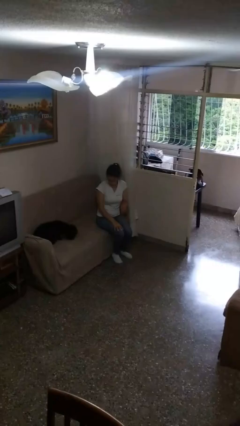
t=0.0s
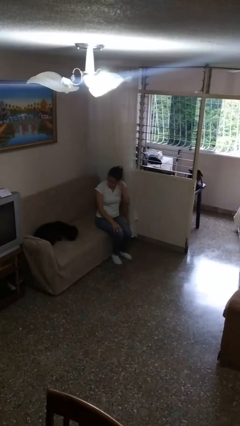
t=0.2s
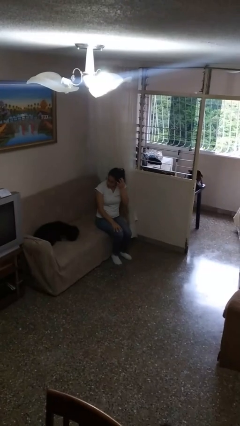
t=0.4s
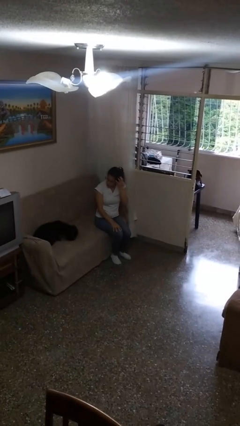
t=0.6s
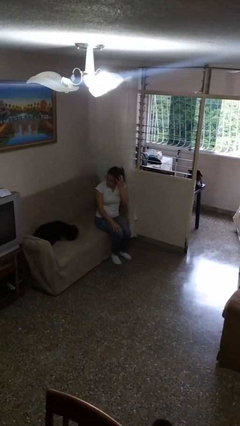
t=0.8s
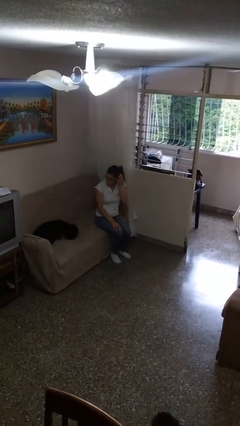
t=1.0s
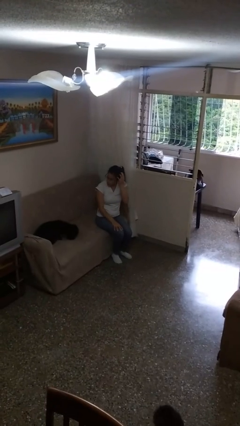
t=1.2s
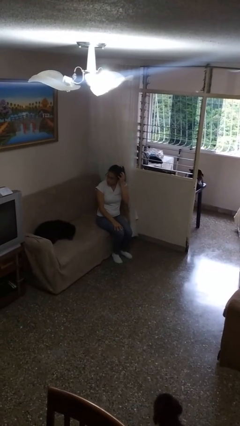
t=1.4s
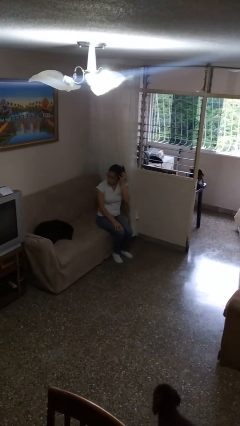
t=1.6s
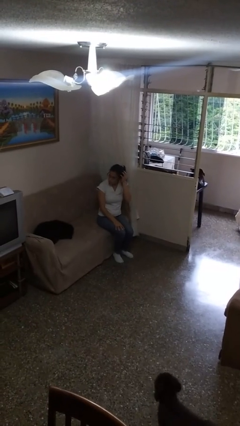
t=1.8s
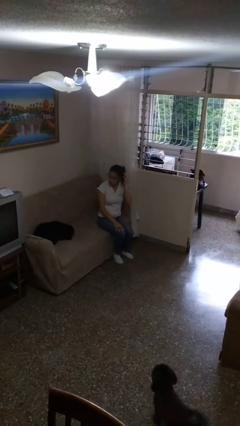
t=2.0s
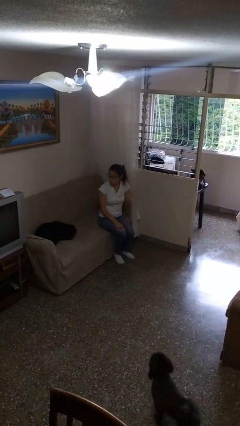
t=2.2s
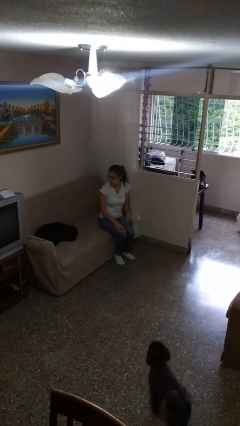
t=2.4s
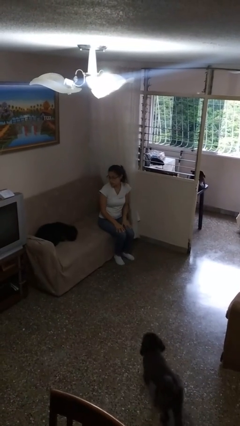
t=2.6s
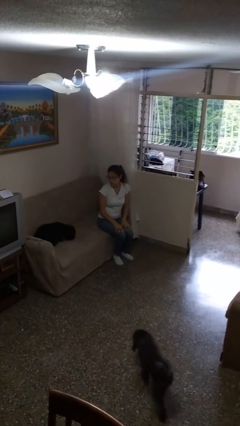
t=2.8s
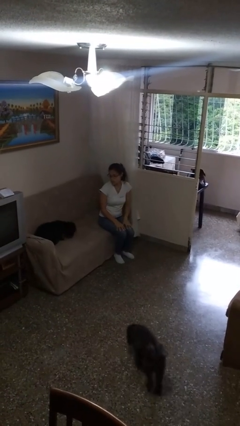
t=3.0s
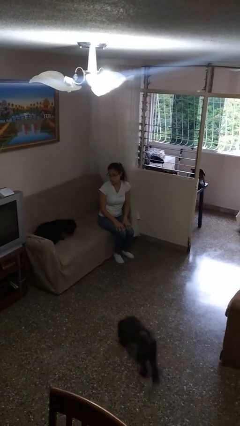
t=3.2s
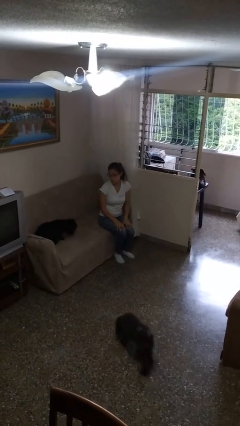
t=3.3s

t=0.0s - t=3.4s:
person scratches face

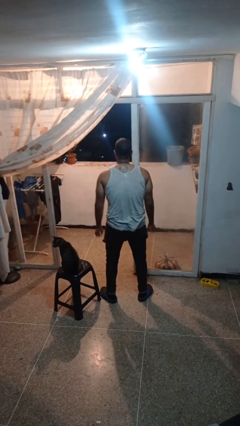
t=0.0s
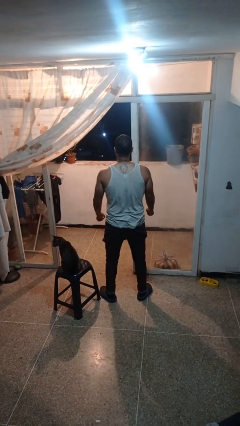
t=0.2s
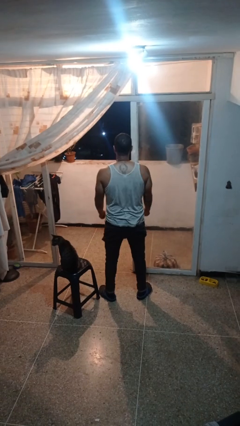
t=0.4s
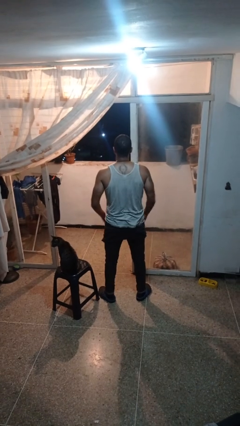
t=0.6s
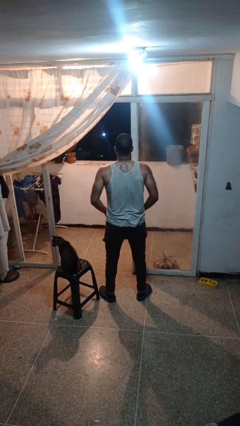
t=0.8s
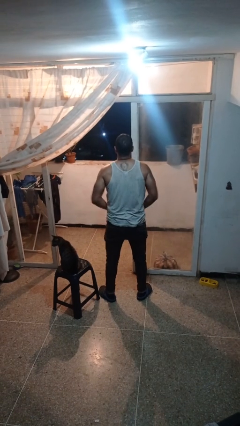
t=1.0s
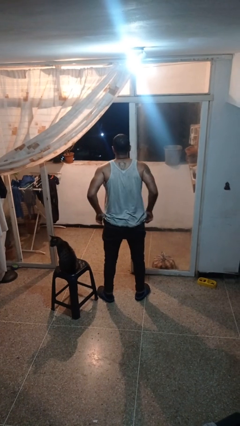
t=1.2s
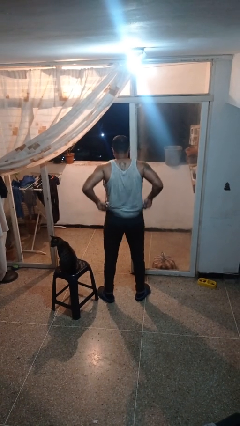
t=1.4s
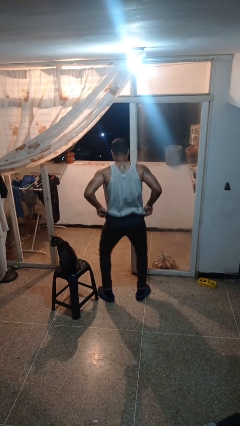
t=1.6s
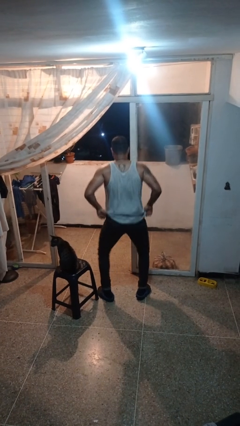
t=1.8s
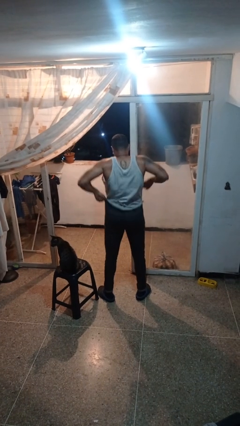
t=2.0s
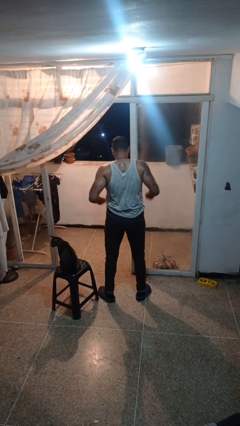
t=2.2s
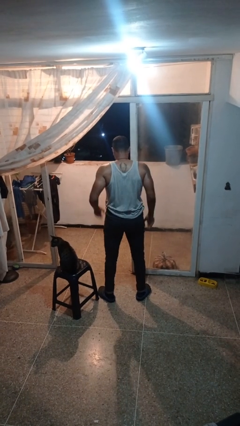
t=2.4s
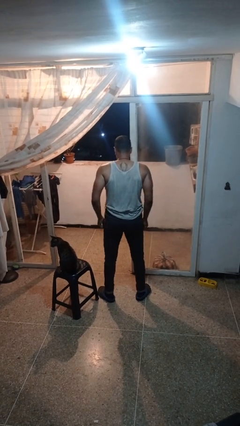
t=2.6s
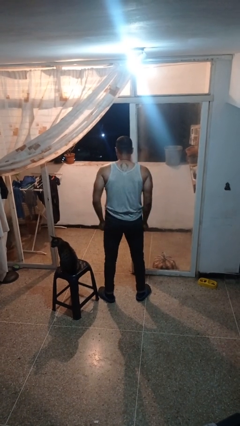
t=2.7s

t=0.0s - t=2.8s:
person hikes up pants

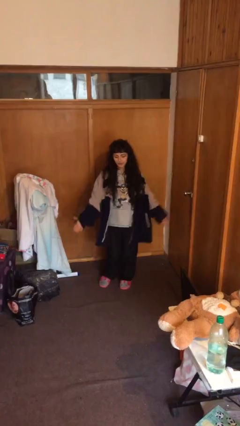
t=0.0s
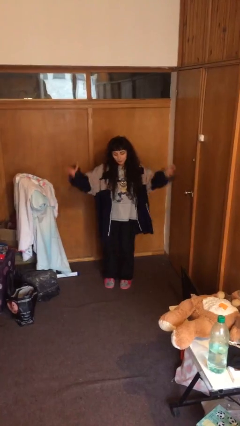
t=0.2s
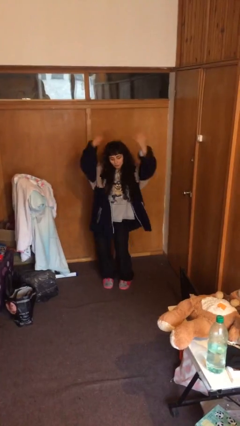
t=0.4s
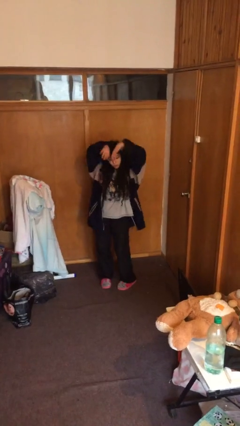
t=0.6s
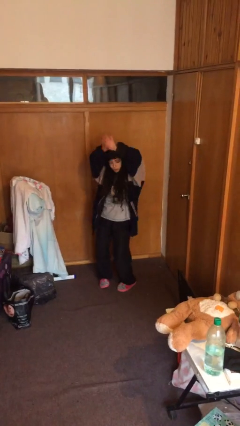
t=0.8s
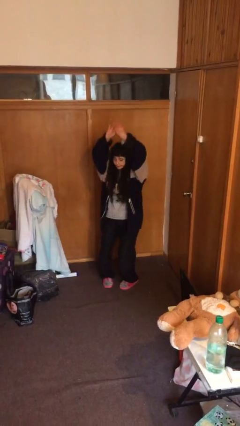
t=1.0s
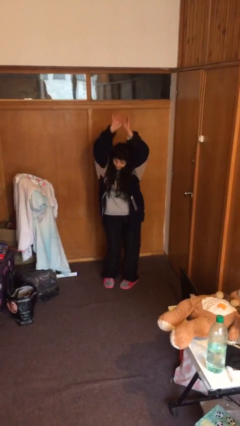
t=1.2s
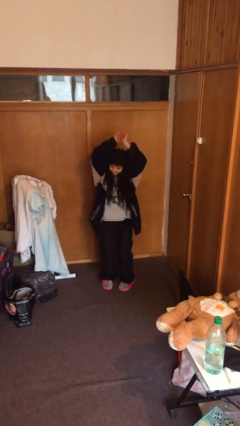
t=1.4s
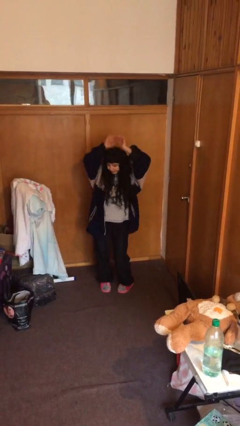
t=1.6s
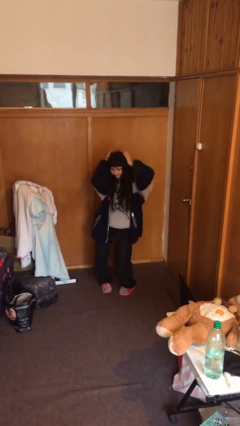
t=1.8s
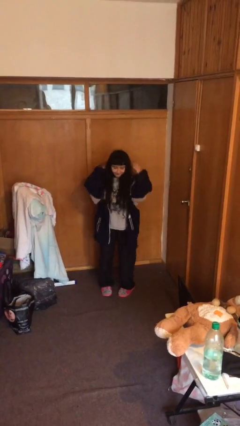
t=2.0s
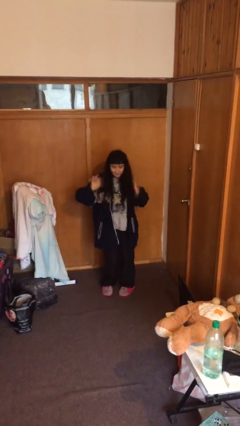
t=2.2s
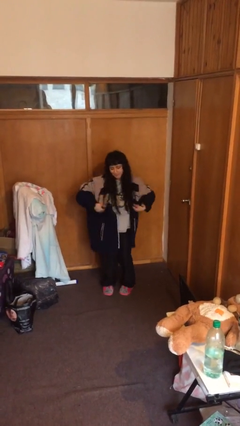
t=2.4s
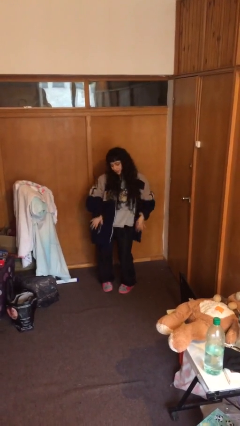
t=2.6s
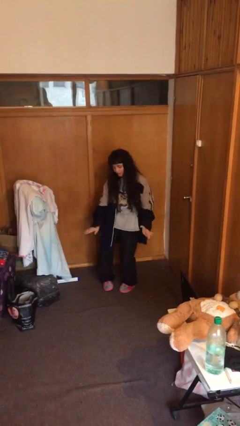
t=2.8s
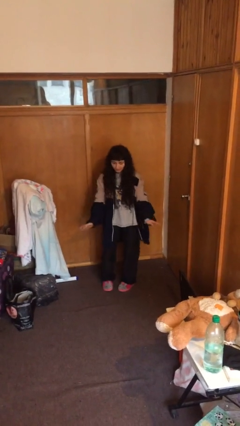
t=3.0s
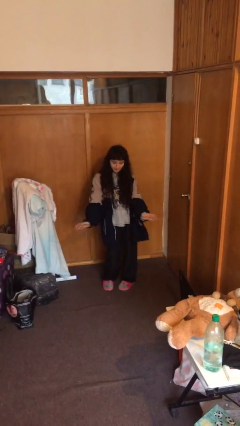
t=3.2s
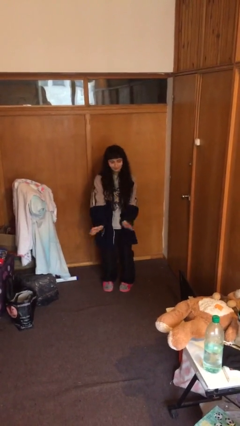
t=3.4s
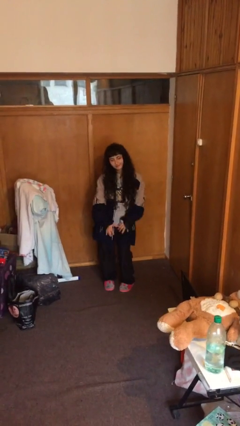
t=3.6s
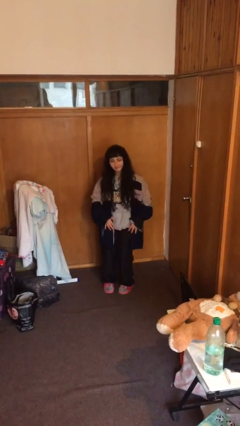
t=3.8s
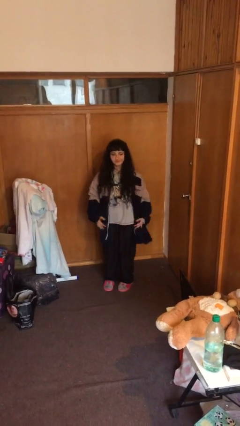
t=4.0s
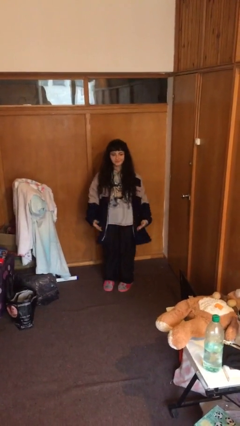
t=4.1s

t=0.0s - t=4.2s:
person dances in place

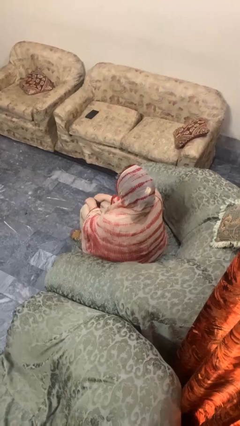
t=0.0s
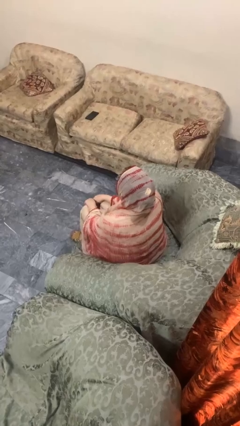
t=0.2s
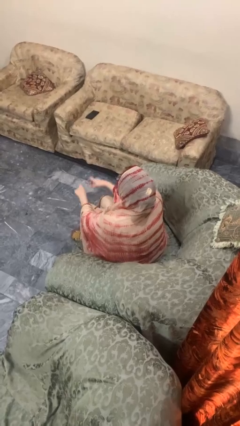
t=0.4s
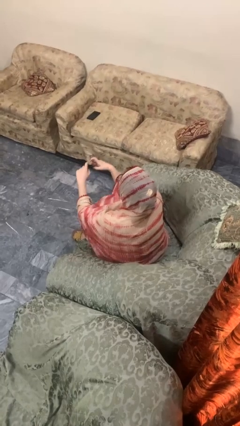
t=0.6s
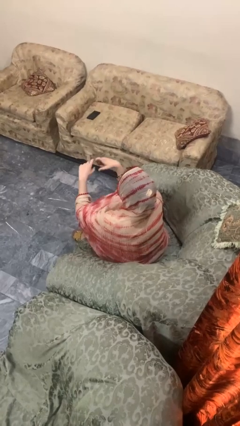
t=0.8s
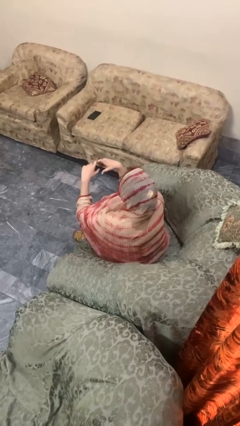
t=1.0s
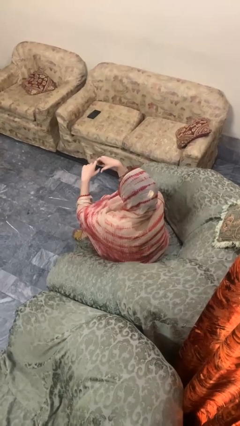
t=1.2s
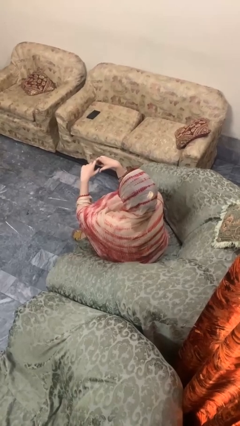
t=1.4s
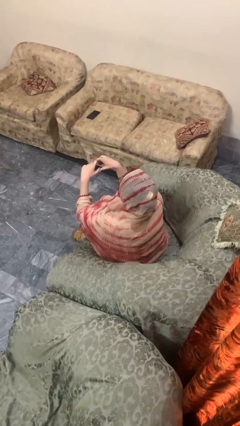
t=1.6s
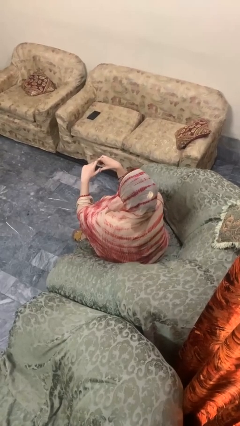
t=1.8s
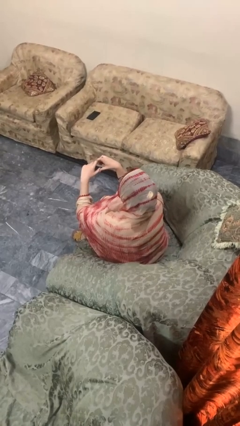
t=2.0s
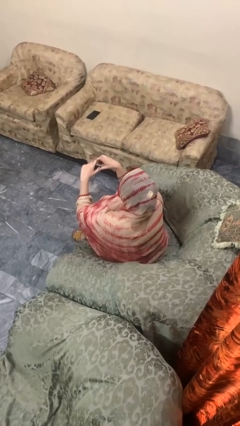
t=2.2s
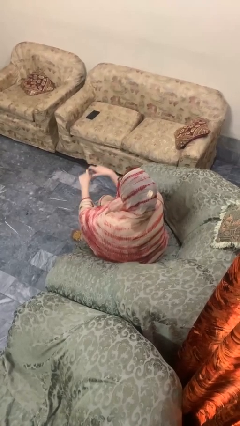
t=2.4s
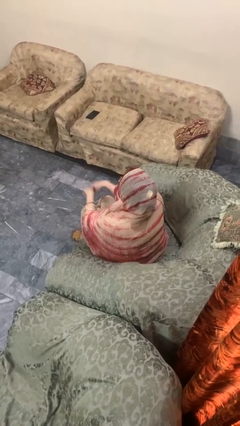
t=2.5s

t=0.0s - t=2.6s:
person gestures heart

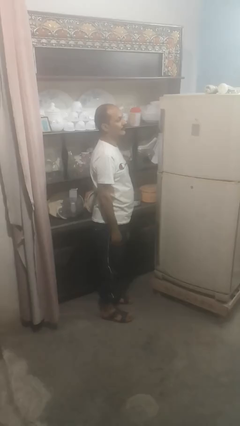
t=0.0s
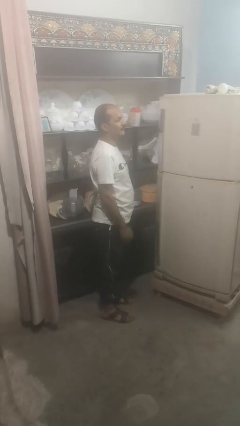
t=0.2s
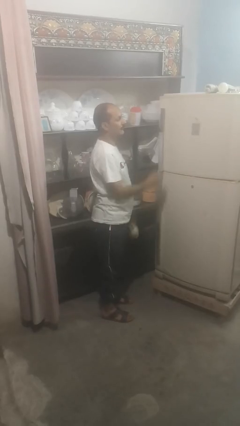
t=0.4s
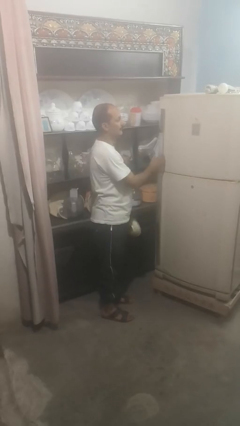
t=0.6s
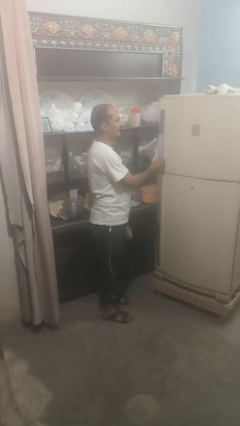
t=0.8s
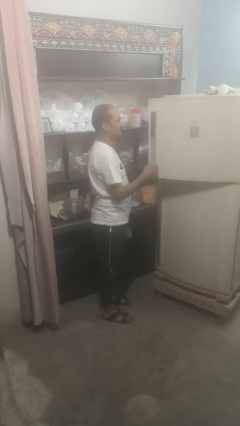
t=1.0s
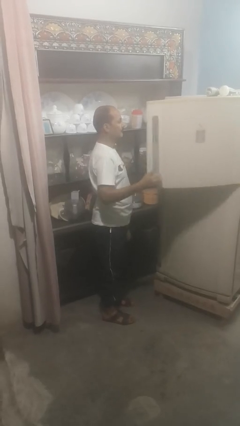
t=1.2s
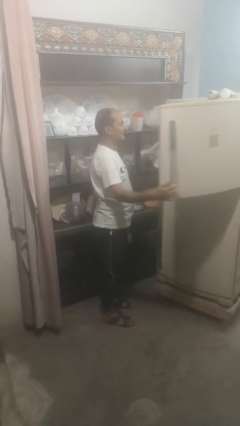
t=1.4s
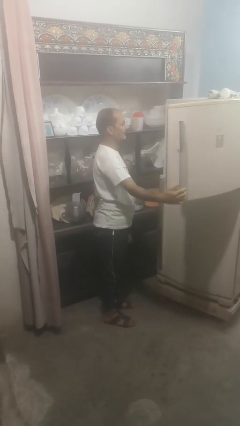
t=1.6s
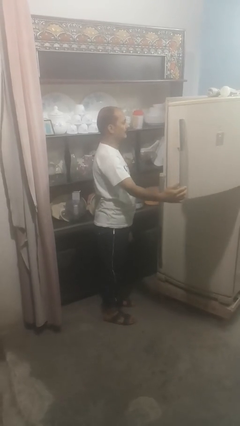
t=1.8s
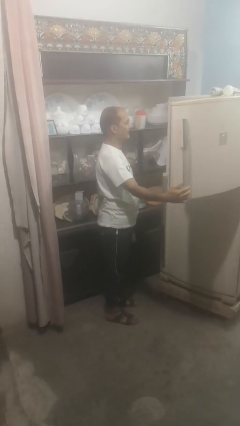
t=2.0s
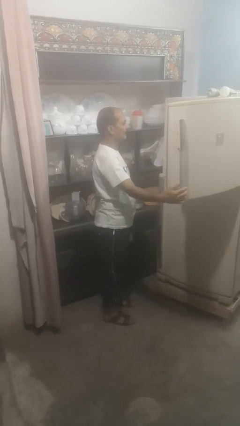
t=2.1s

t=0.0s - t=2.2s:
person opens refrigerator

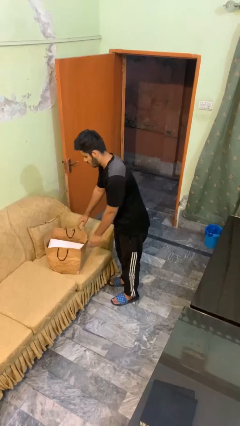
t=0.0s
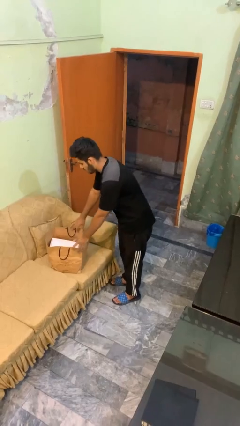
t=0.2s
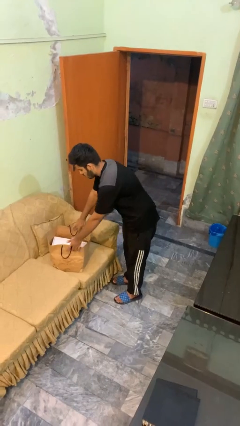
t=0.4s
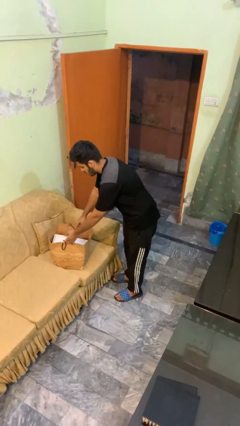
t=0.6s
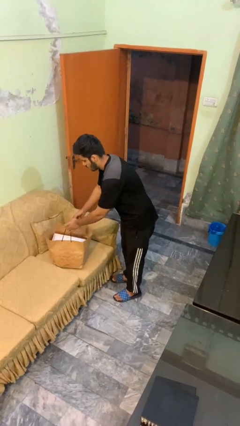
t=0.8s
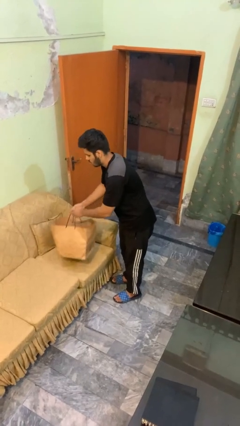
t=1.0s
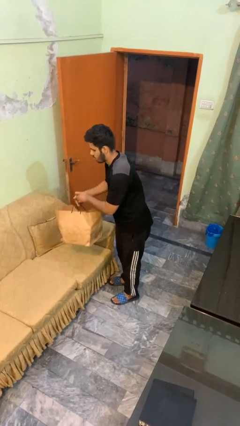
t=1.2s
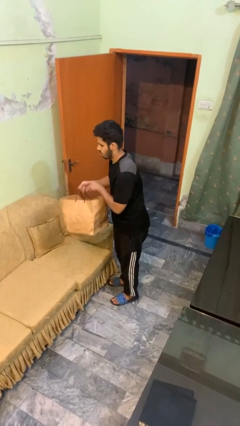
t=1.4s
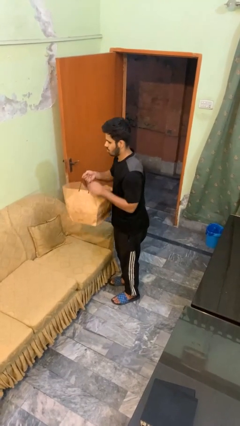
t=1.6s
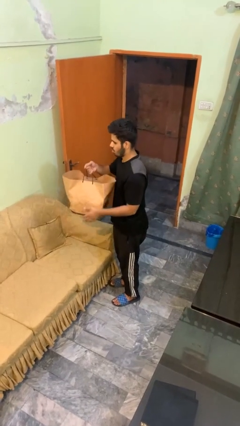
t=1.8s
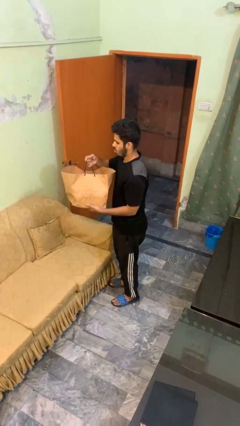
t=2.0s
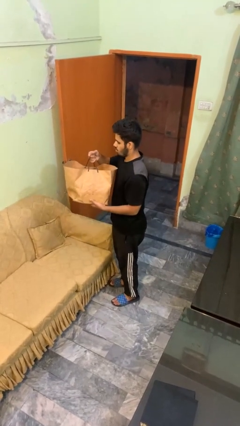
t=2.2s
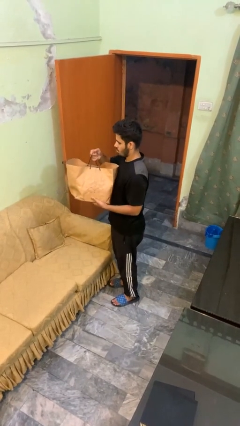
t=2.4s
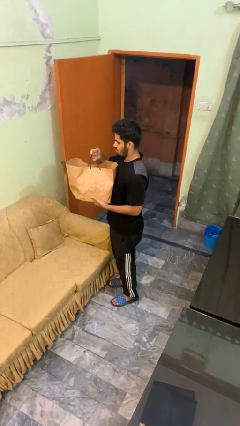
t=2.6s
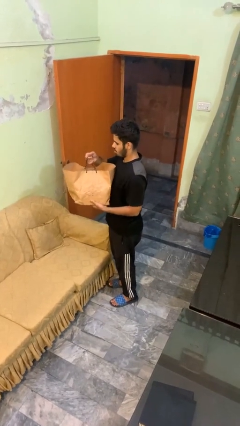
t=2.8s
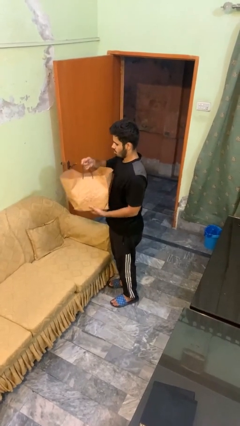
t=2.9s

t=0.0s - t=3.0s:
person picks up object from couch
